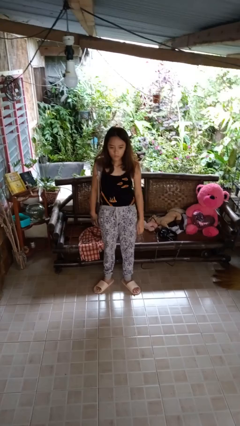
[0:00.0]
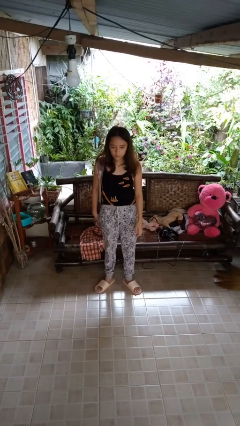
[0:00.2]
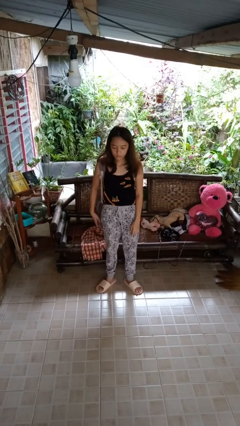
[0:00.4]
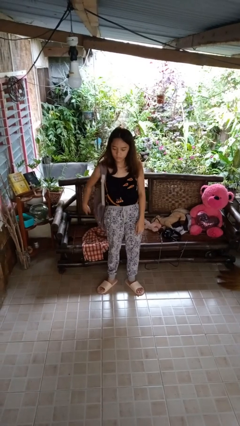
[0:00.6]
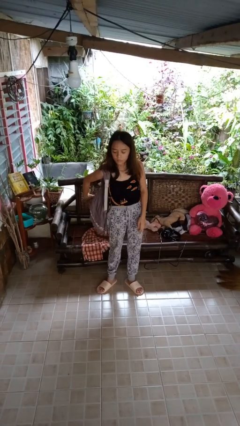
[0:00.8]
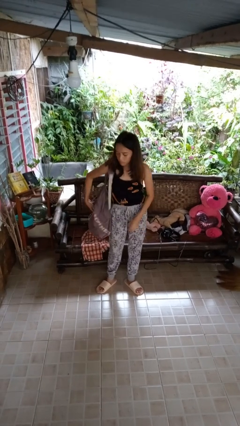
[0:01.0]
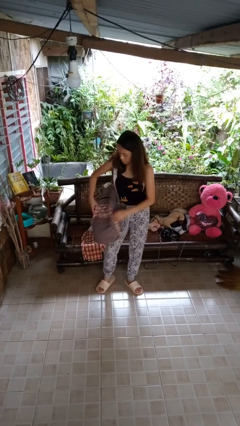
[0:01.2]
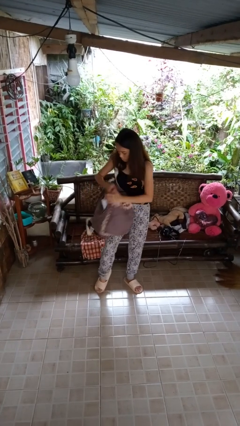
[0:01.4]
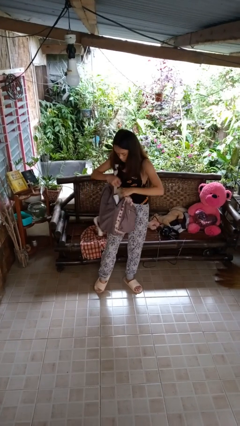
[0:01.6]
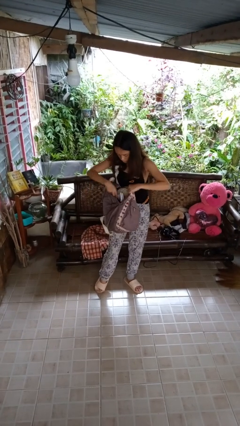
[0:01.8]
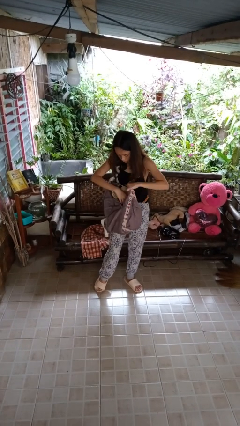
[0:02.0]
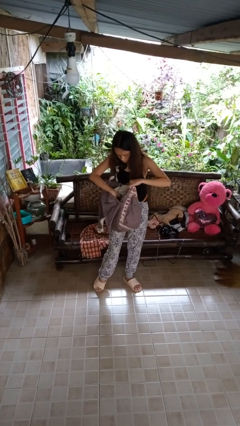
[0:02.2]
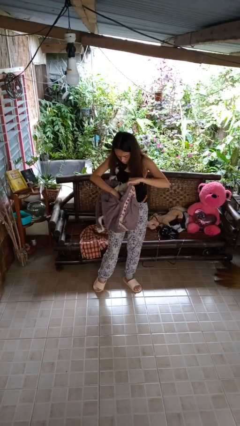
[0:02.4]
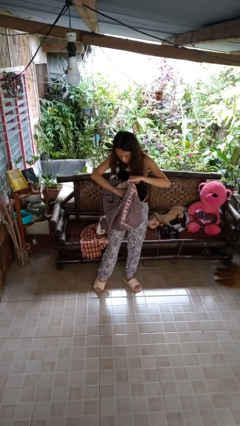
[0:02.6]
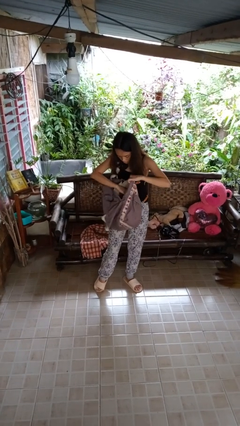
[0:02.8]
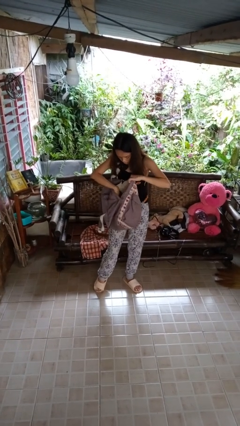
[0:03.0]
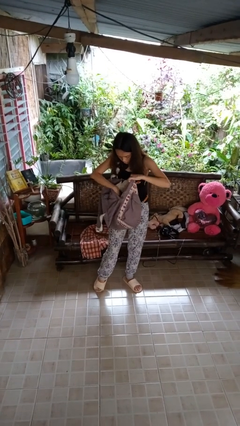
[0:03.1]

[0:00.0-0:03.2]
person searches in backpack

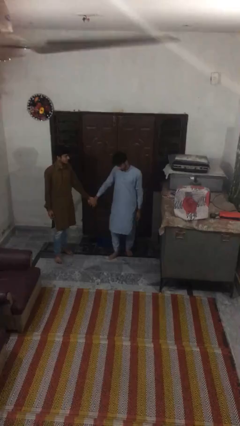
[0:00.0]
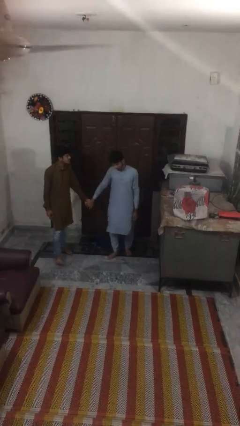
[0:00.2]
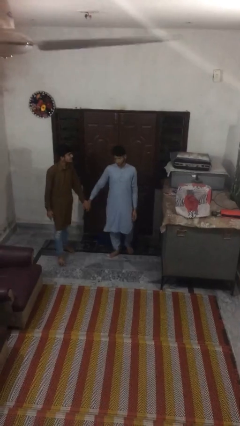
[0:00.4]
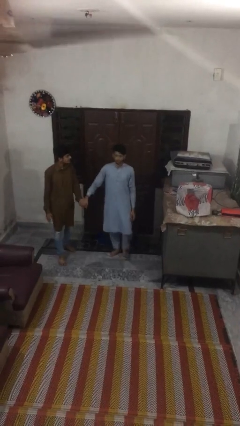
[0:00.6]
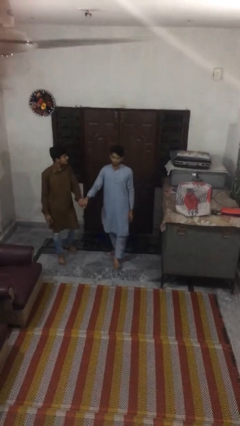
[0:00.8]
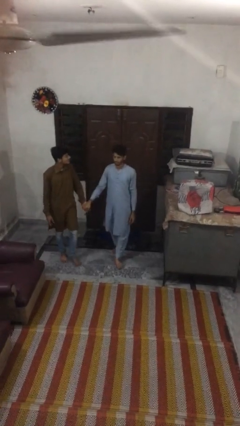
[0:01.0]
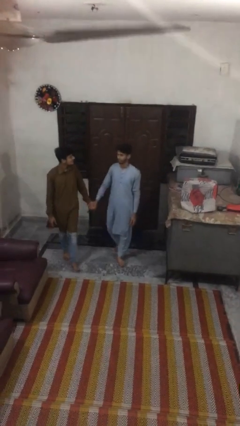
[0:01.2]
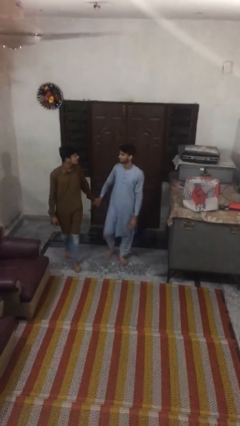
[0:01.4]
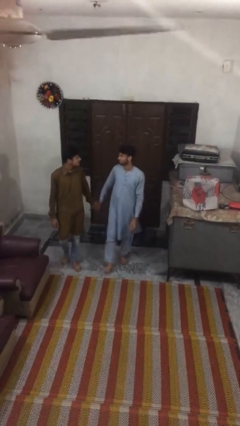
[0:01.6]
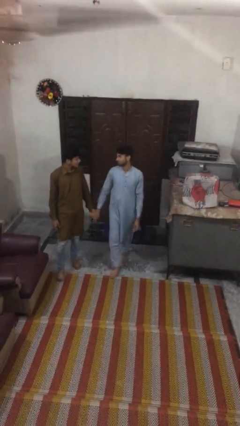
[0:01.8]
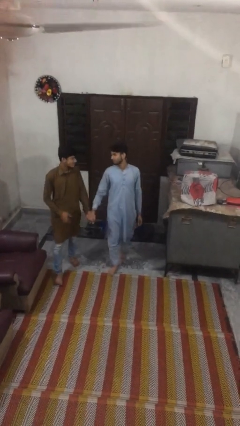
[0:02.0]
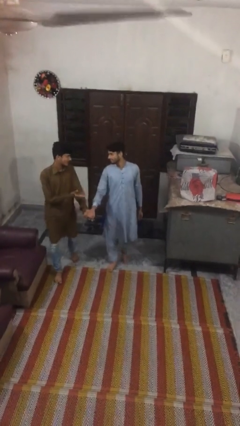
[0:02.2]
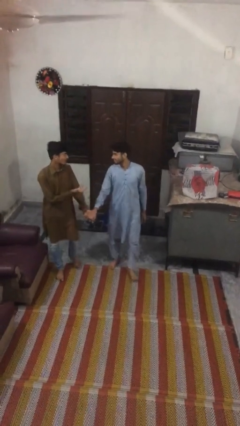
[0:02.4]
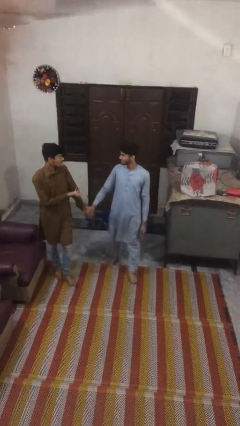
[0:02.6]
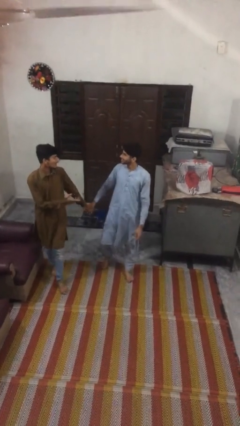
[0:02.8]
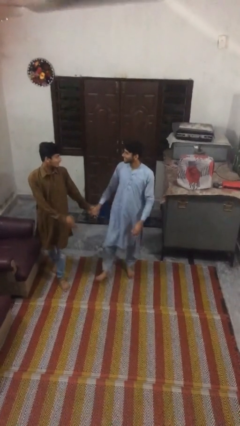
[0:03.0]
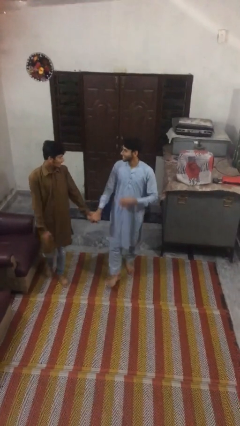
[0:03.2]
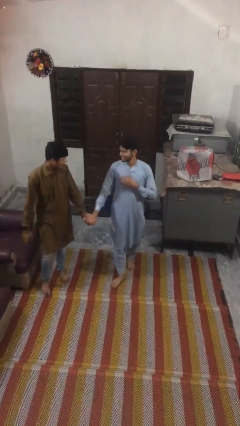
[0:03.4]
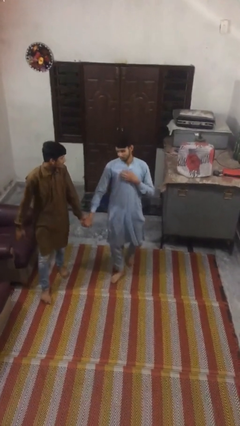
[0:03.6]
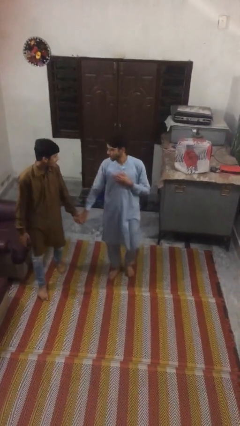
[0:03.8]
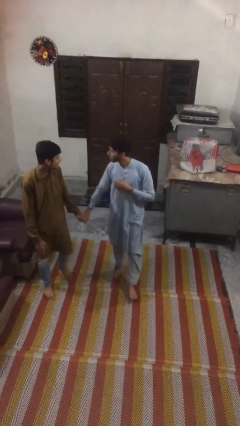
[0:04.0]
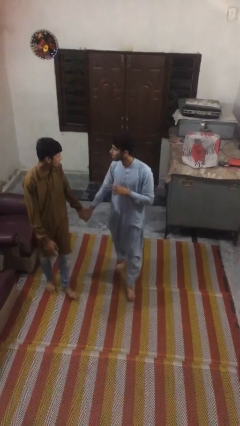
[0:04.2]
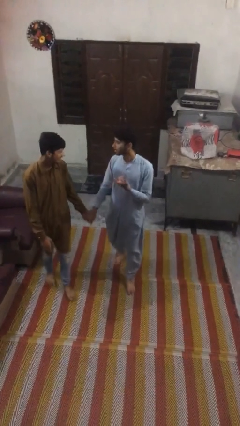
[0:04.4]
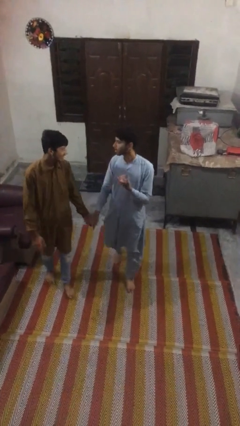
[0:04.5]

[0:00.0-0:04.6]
person holds hand

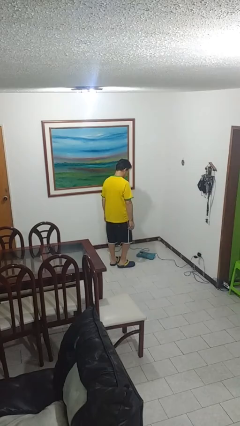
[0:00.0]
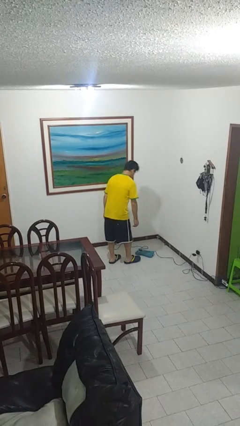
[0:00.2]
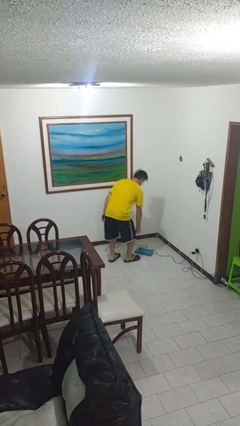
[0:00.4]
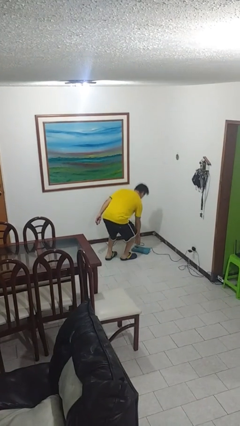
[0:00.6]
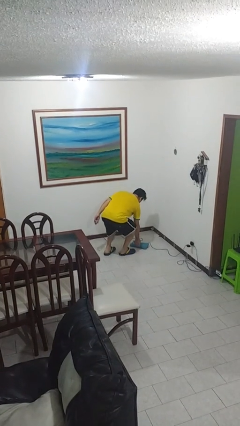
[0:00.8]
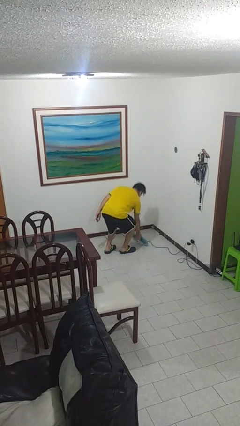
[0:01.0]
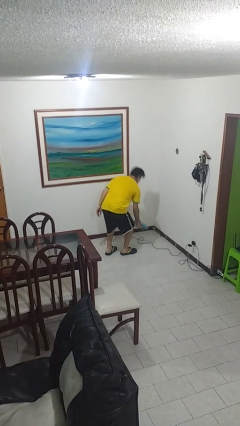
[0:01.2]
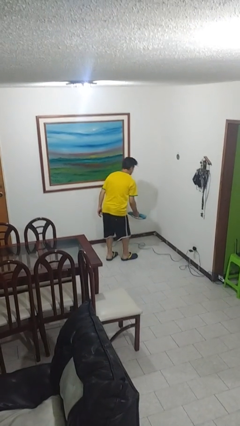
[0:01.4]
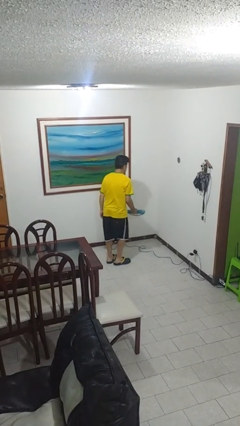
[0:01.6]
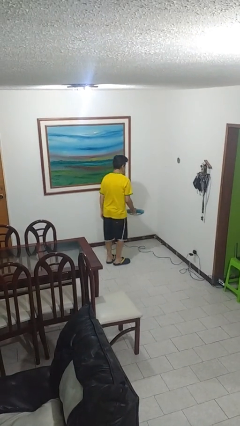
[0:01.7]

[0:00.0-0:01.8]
person picks up object from floor

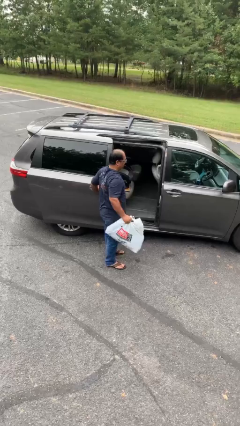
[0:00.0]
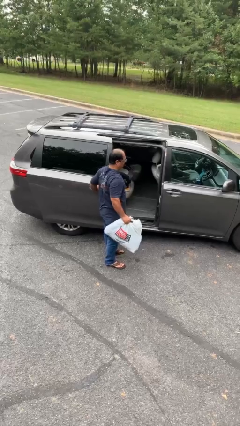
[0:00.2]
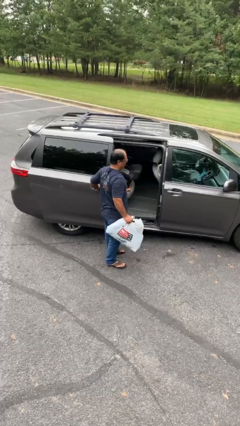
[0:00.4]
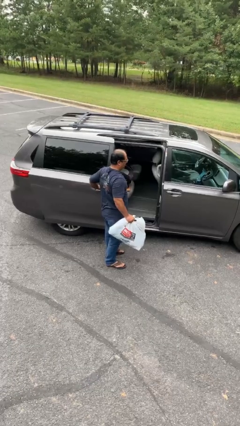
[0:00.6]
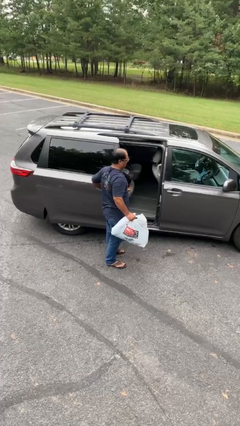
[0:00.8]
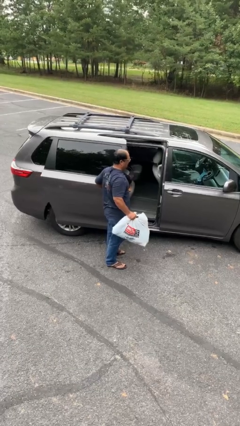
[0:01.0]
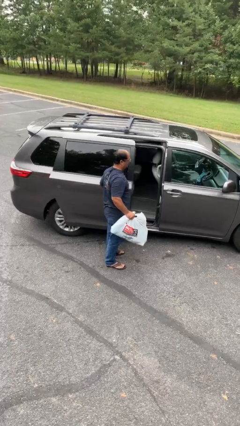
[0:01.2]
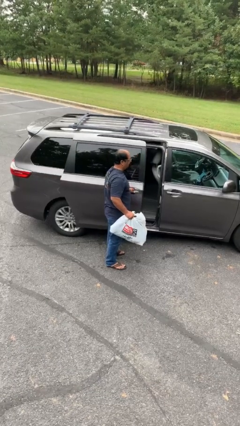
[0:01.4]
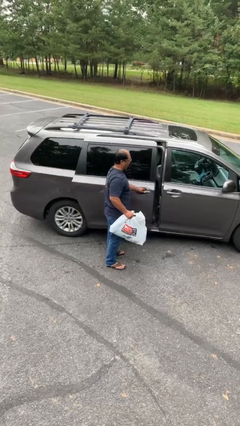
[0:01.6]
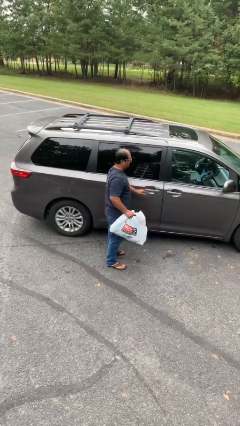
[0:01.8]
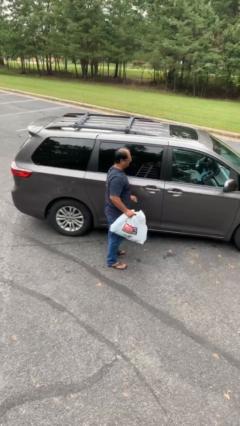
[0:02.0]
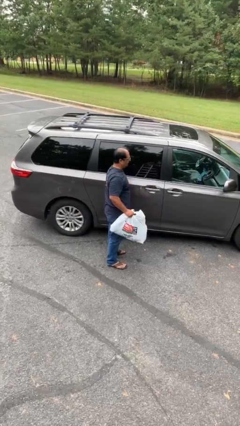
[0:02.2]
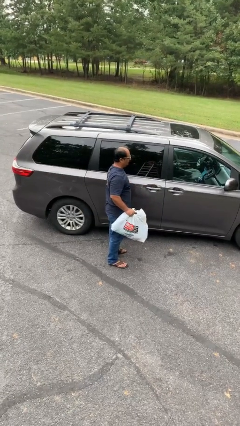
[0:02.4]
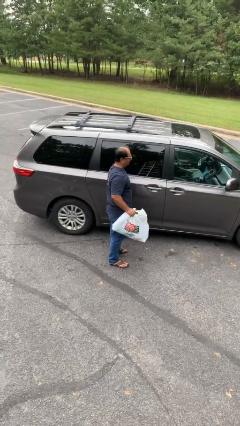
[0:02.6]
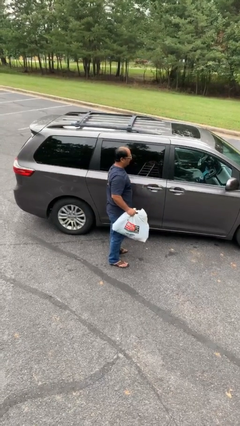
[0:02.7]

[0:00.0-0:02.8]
person closes car door

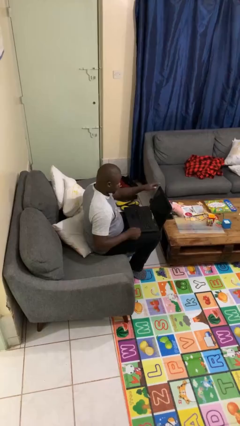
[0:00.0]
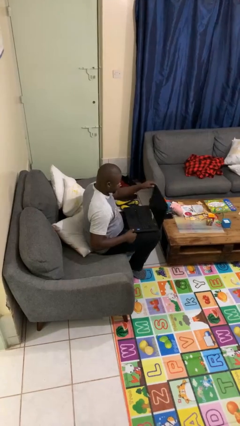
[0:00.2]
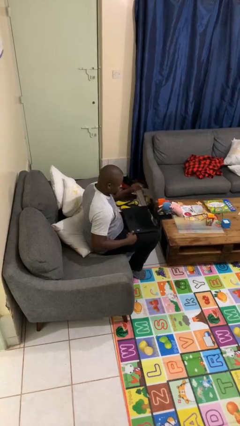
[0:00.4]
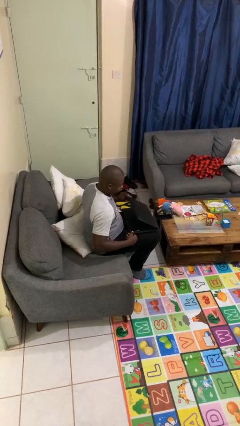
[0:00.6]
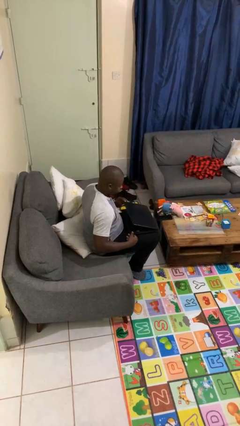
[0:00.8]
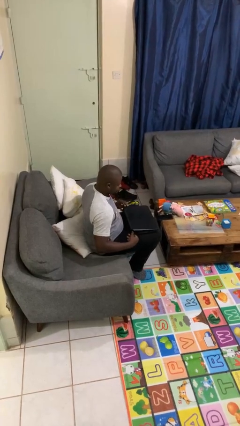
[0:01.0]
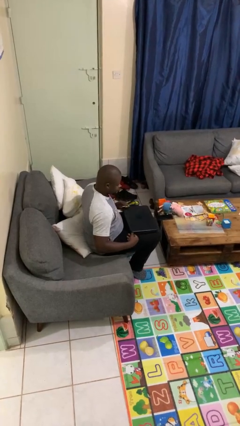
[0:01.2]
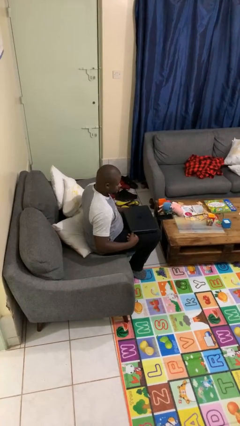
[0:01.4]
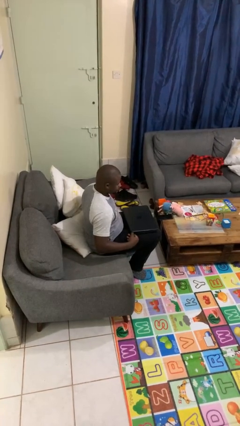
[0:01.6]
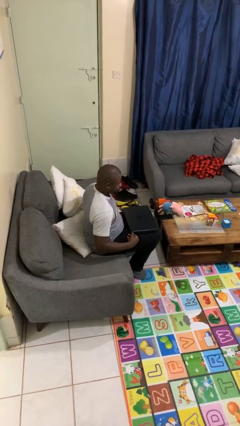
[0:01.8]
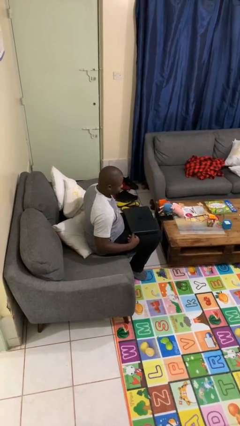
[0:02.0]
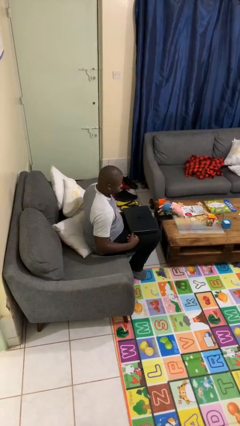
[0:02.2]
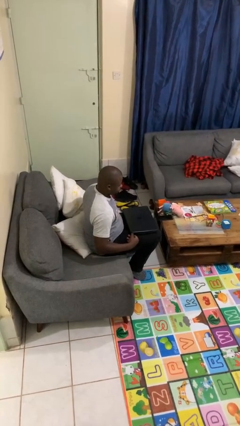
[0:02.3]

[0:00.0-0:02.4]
person closes laptop

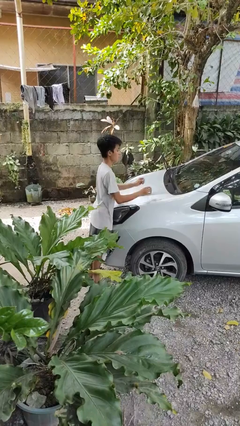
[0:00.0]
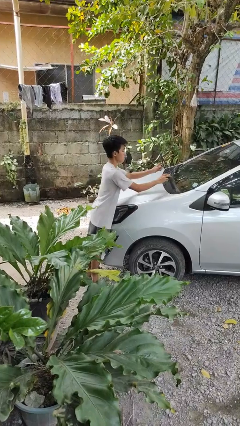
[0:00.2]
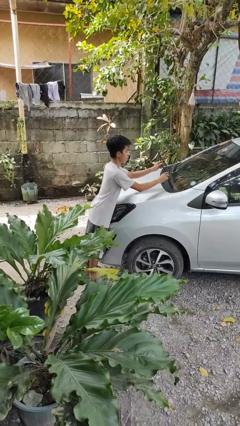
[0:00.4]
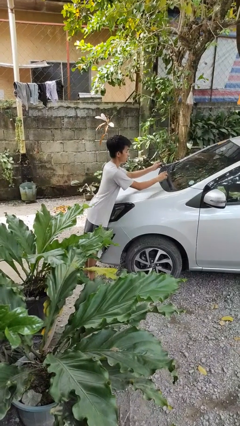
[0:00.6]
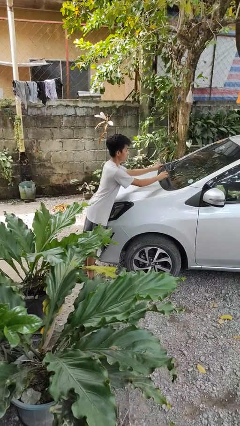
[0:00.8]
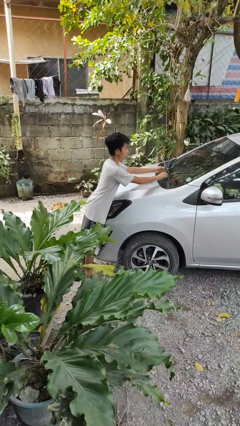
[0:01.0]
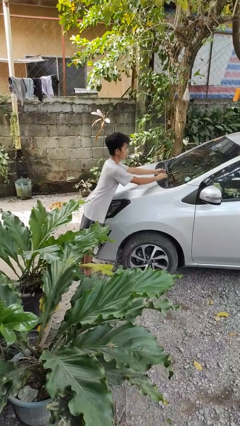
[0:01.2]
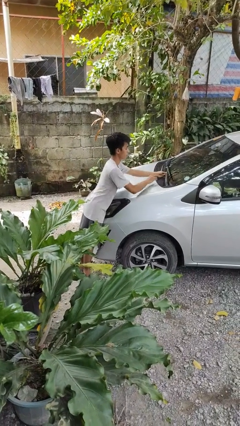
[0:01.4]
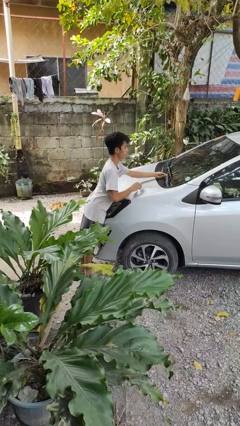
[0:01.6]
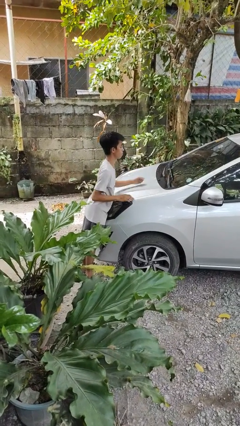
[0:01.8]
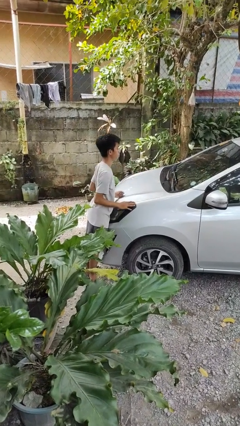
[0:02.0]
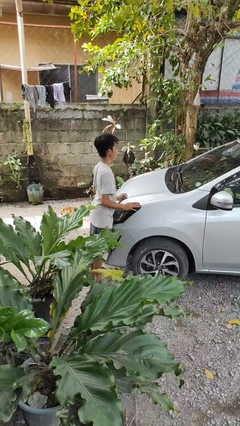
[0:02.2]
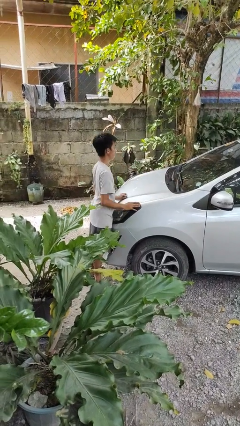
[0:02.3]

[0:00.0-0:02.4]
person flips down car wipers

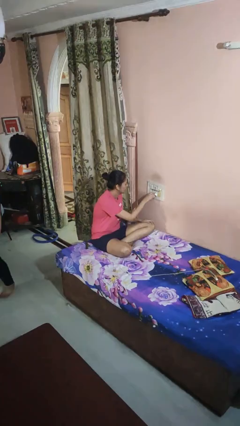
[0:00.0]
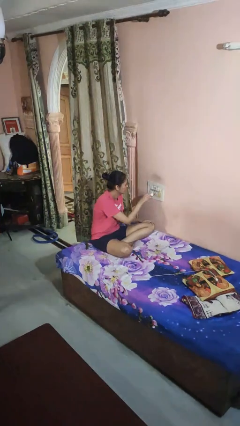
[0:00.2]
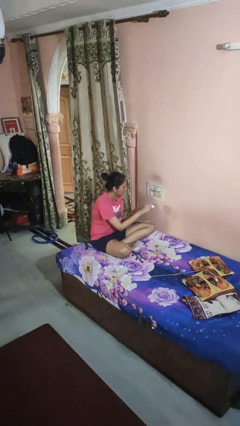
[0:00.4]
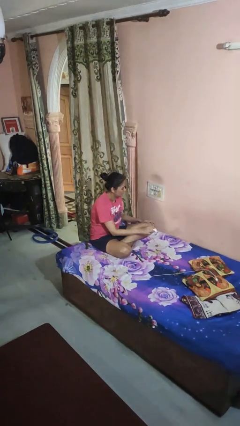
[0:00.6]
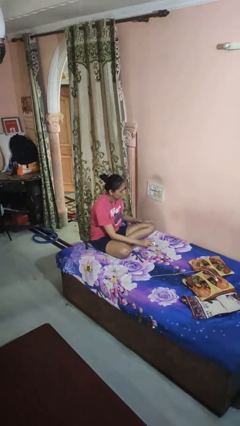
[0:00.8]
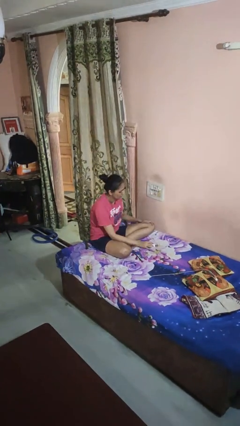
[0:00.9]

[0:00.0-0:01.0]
person unplugs from electrical socket
